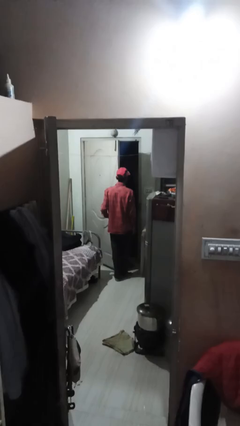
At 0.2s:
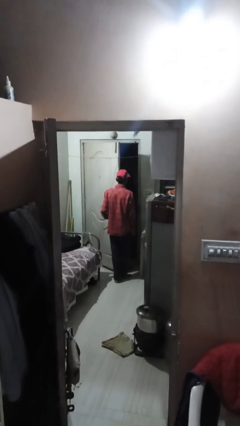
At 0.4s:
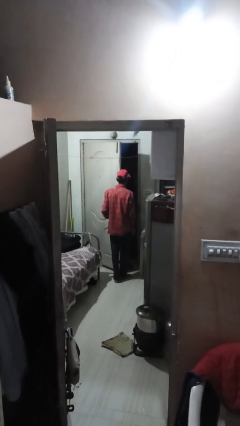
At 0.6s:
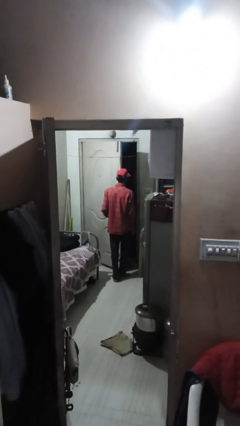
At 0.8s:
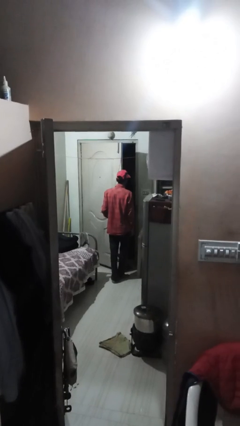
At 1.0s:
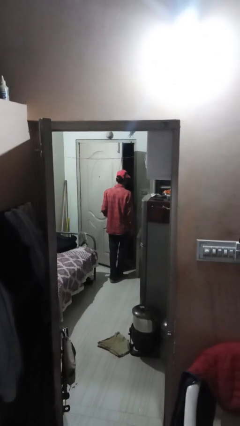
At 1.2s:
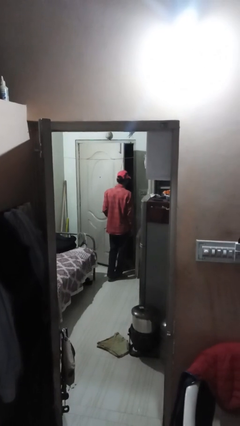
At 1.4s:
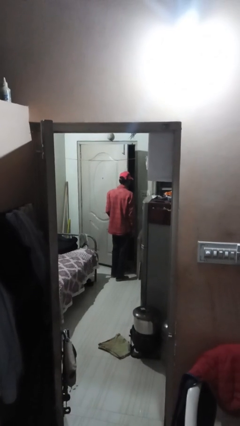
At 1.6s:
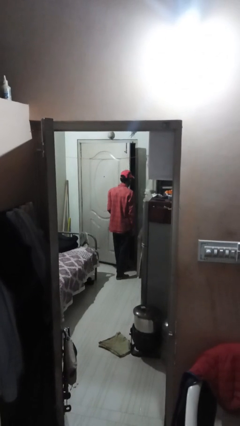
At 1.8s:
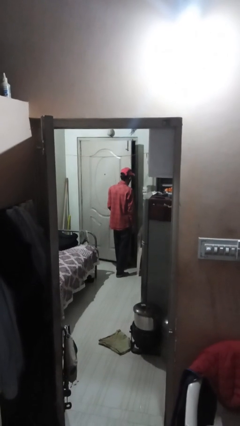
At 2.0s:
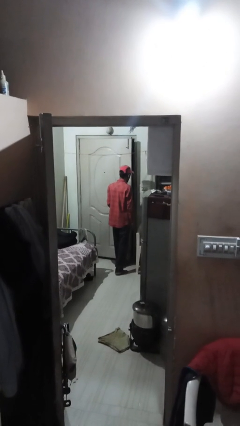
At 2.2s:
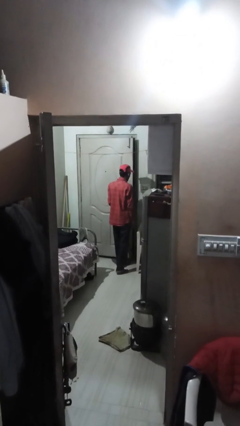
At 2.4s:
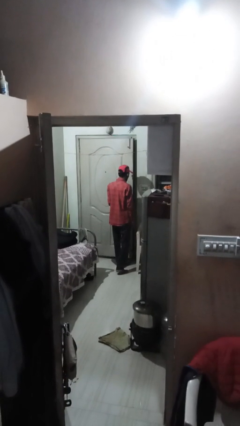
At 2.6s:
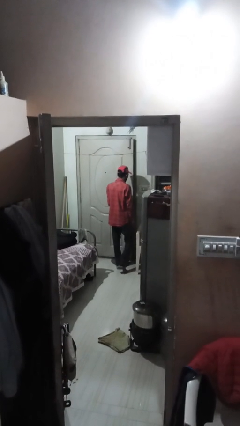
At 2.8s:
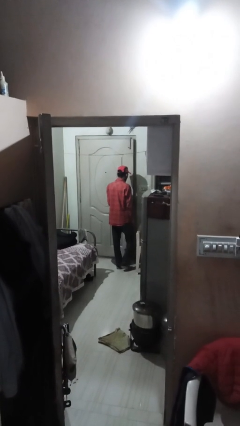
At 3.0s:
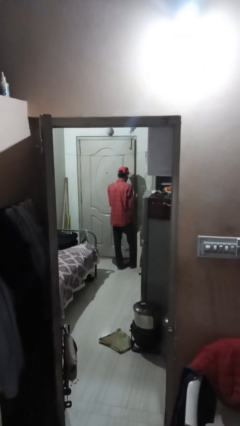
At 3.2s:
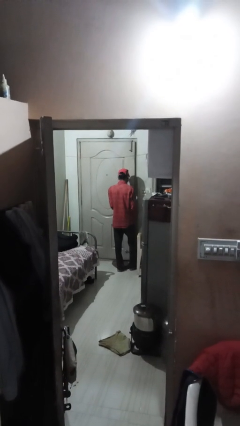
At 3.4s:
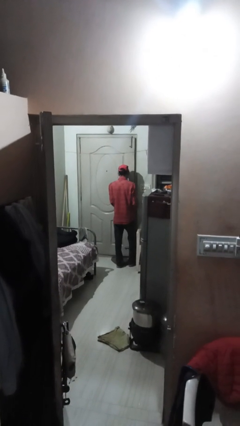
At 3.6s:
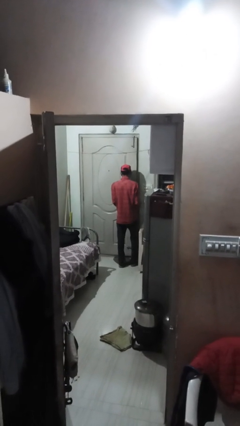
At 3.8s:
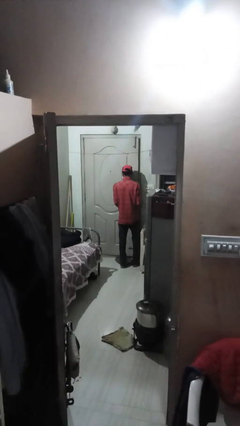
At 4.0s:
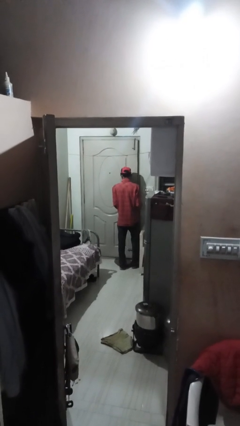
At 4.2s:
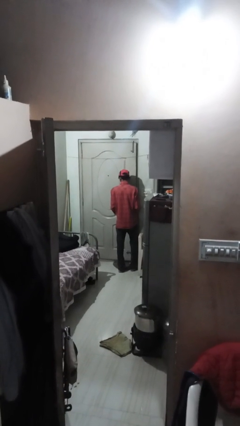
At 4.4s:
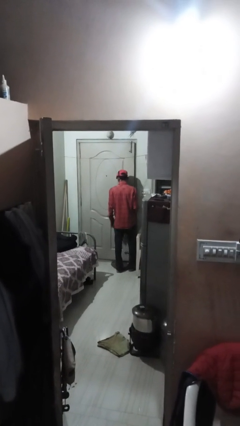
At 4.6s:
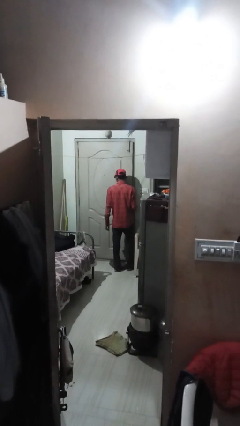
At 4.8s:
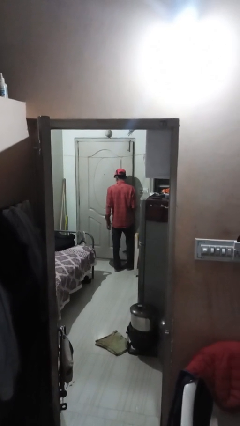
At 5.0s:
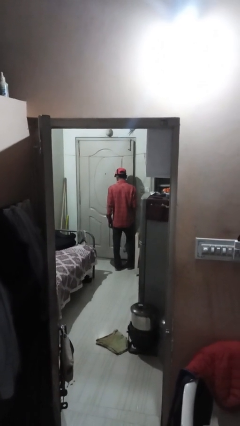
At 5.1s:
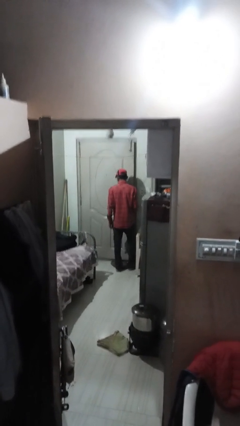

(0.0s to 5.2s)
person closes facility door

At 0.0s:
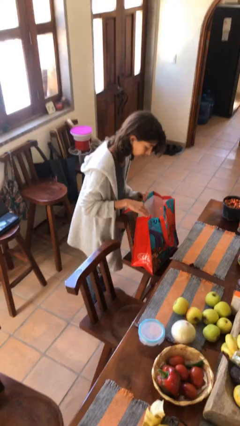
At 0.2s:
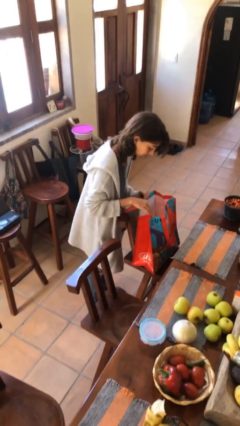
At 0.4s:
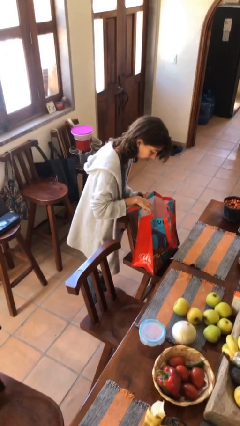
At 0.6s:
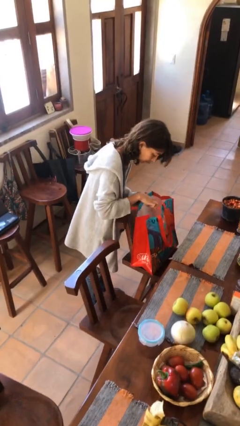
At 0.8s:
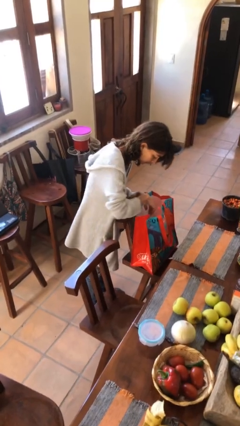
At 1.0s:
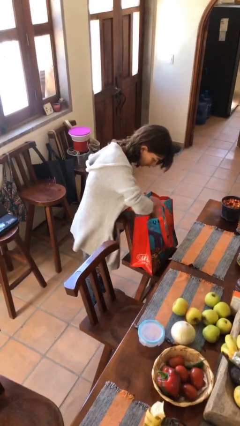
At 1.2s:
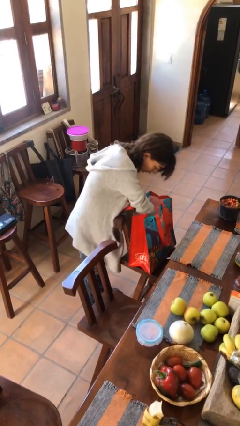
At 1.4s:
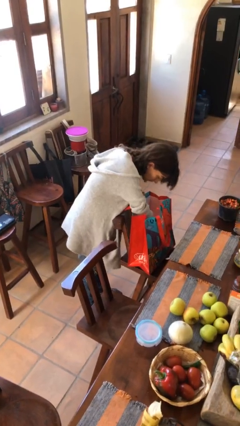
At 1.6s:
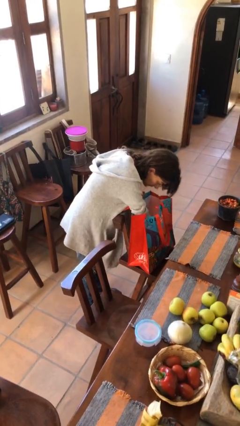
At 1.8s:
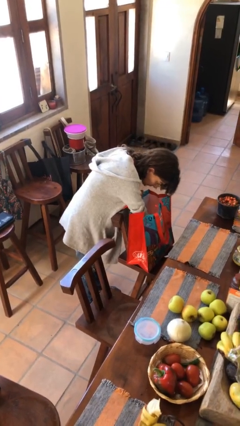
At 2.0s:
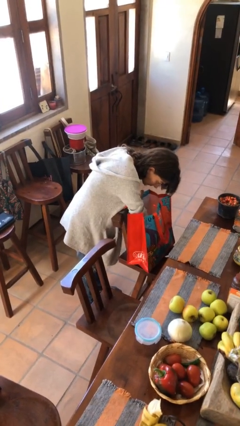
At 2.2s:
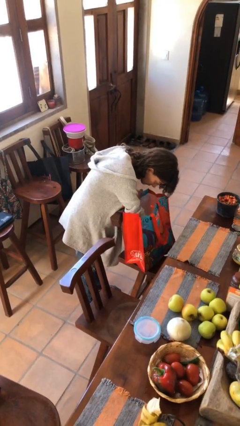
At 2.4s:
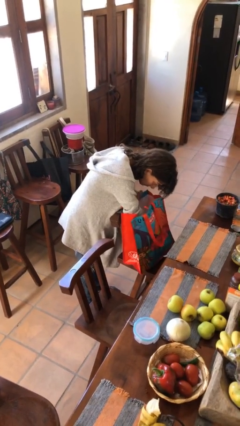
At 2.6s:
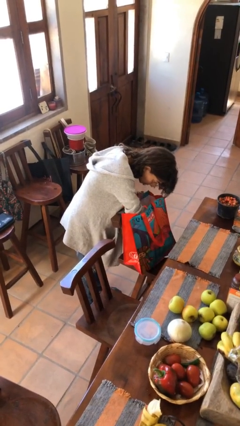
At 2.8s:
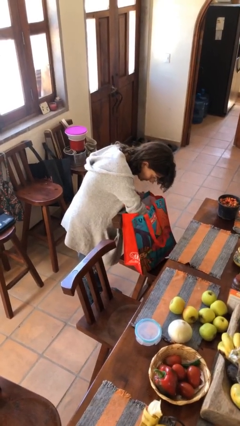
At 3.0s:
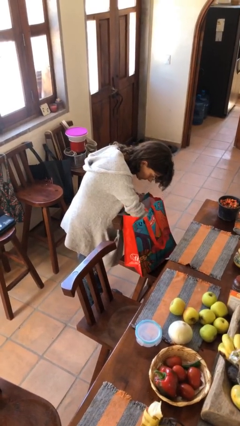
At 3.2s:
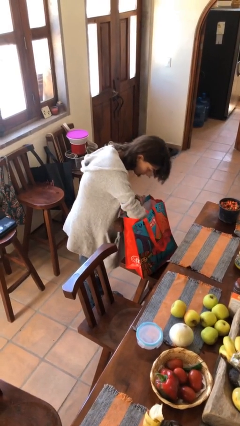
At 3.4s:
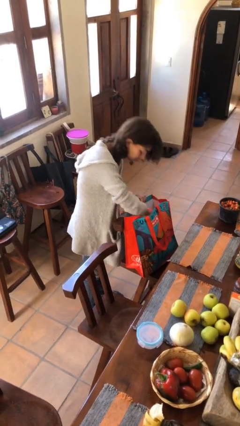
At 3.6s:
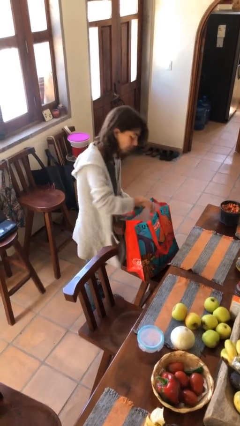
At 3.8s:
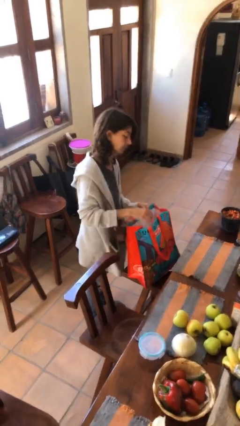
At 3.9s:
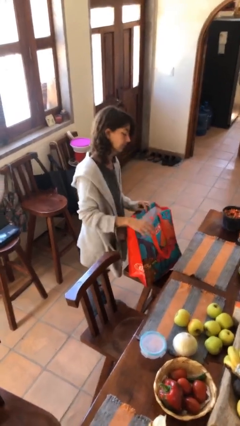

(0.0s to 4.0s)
person searches in bag

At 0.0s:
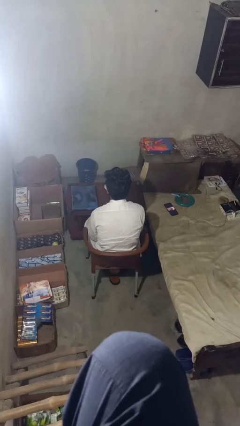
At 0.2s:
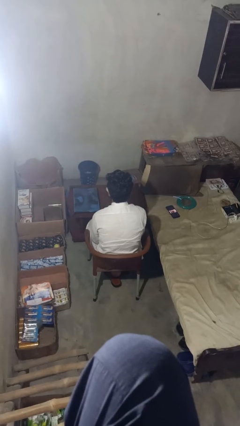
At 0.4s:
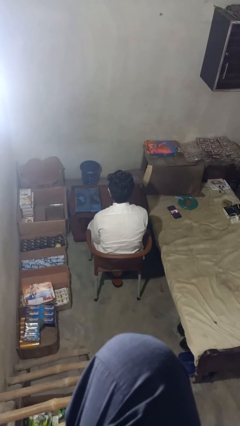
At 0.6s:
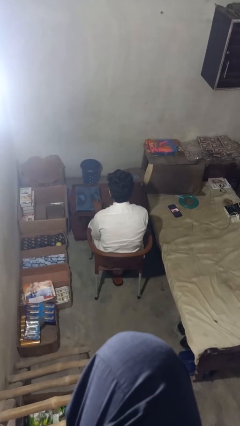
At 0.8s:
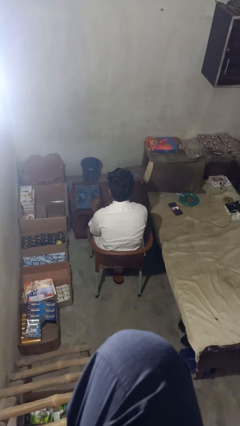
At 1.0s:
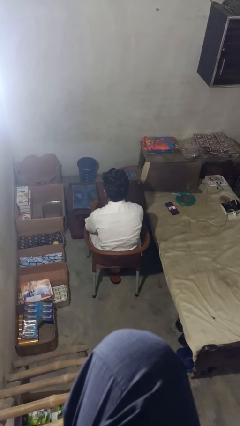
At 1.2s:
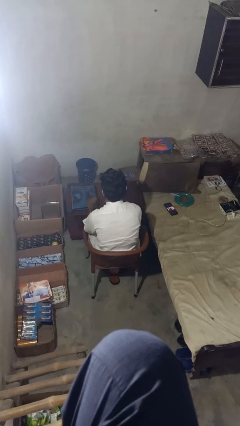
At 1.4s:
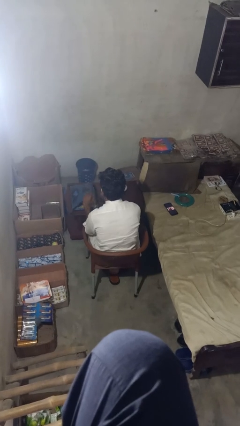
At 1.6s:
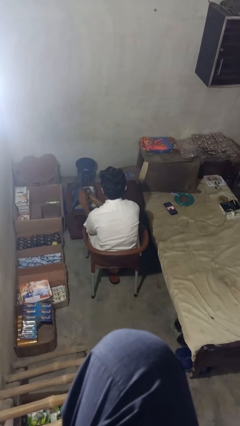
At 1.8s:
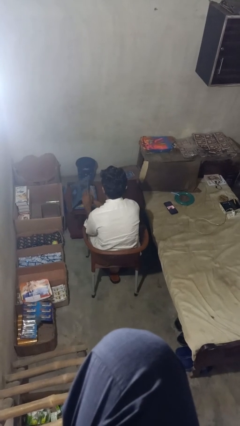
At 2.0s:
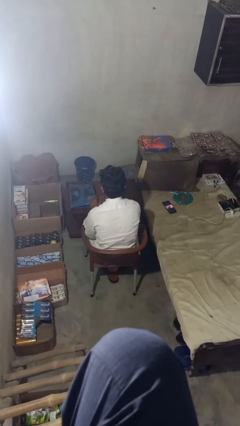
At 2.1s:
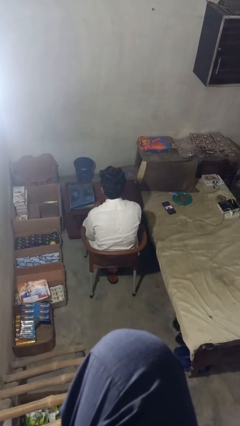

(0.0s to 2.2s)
person takes object from bag

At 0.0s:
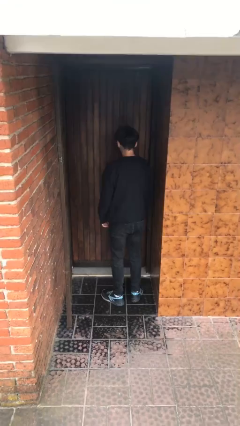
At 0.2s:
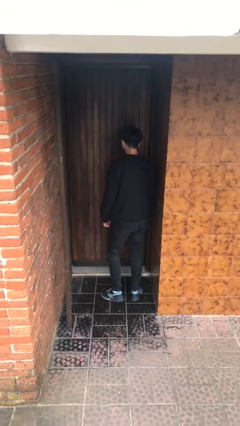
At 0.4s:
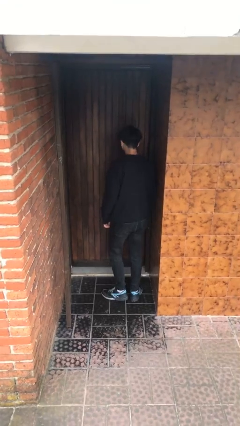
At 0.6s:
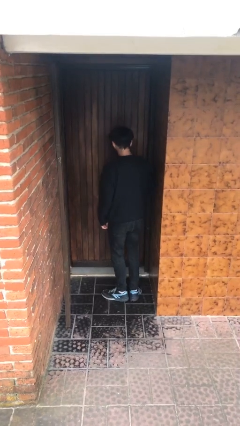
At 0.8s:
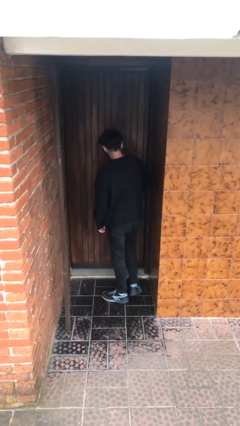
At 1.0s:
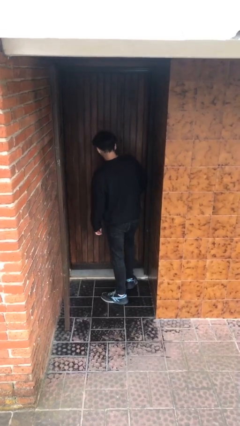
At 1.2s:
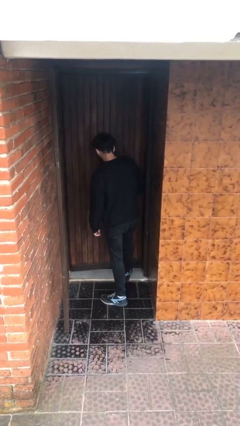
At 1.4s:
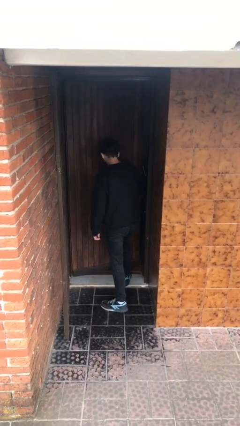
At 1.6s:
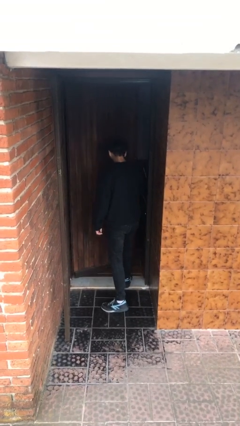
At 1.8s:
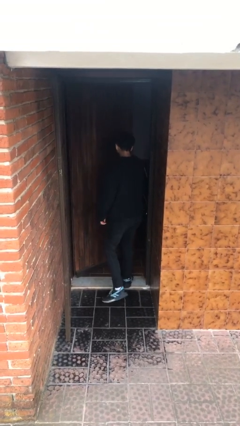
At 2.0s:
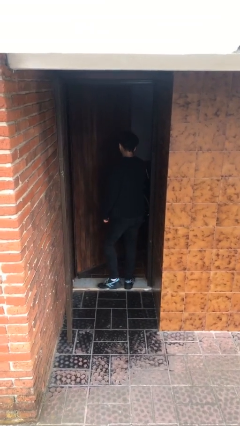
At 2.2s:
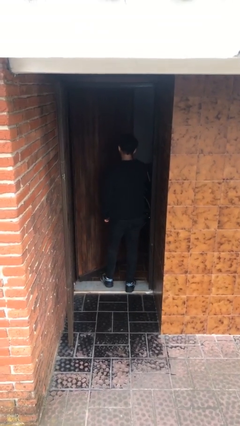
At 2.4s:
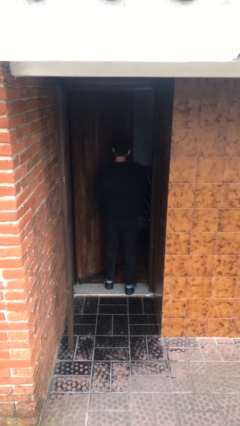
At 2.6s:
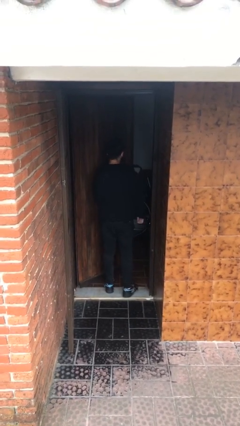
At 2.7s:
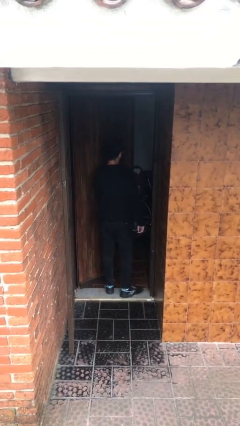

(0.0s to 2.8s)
person opens facility door

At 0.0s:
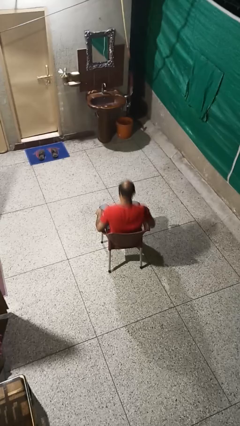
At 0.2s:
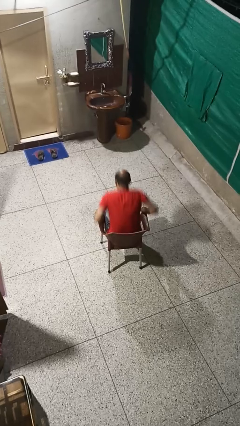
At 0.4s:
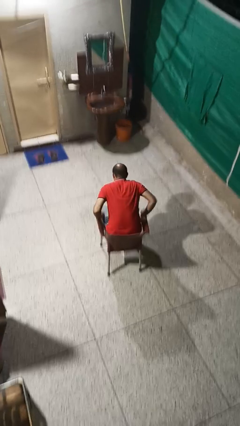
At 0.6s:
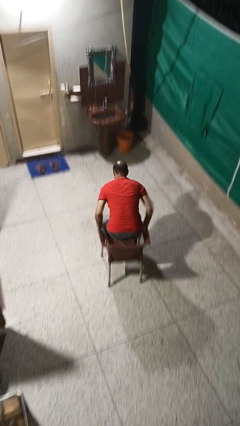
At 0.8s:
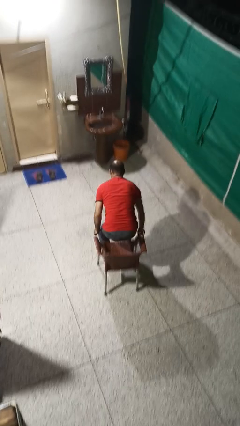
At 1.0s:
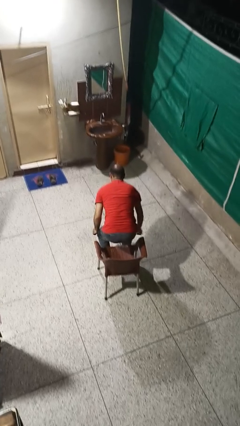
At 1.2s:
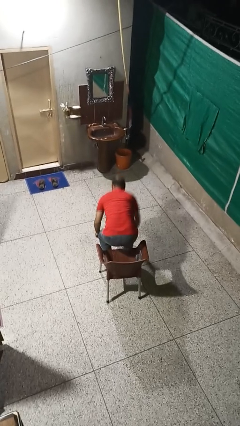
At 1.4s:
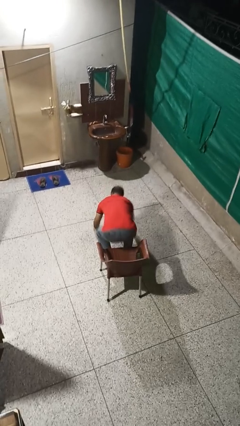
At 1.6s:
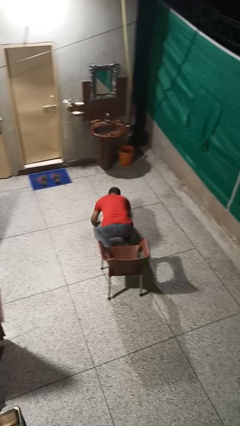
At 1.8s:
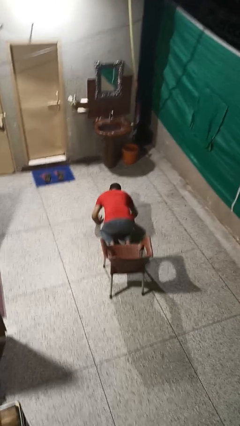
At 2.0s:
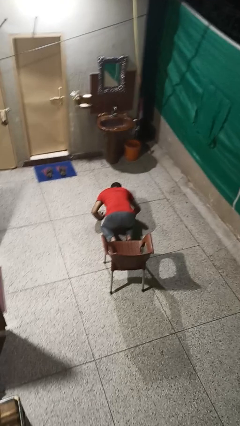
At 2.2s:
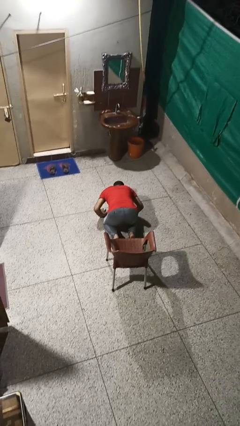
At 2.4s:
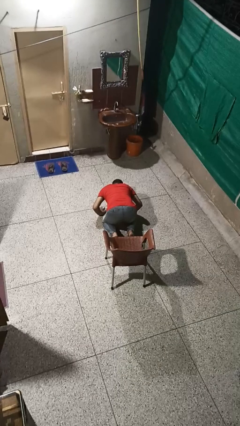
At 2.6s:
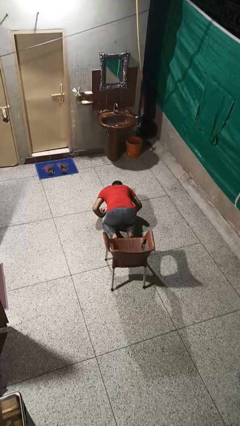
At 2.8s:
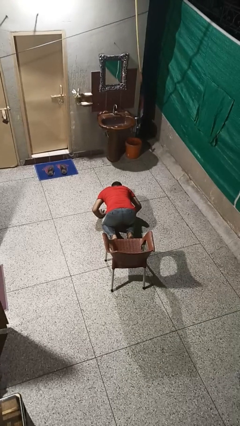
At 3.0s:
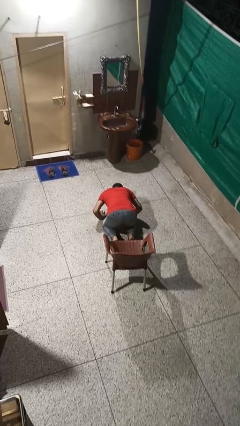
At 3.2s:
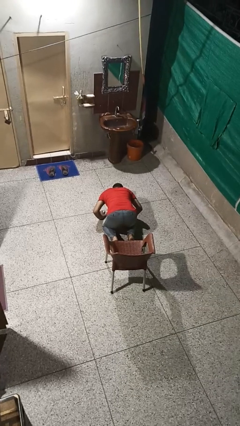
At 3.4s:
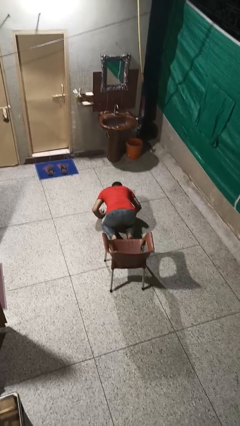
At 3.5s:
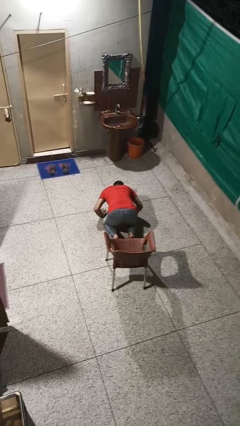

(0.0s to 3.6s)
person falls from chair
